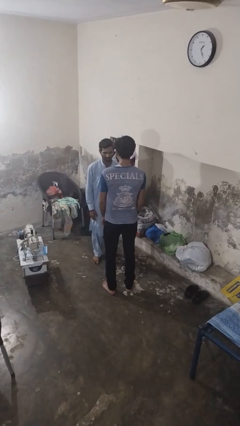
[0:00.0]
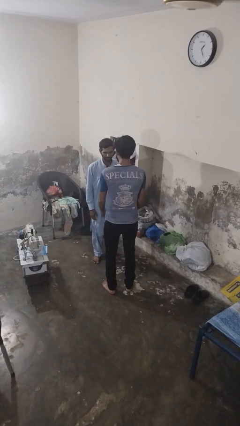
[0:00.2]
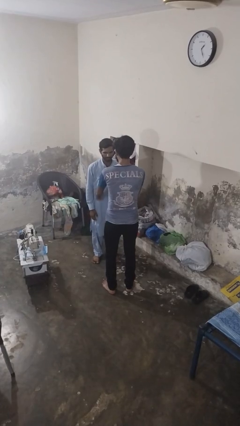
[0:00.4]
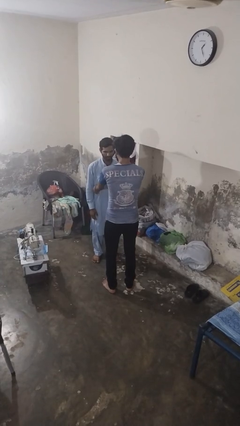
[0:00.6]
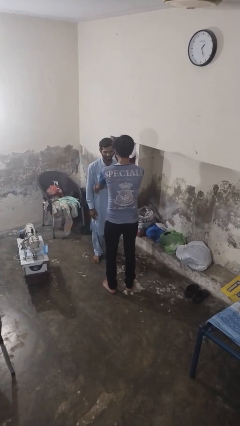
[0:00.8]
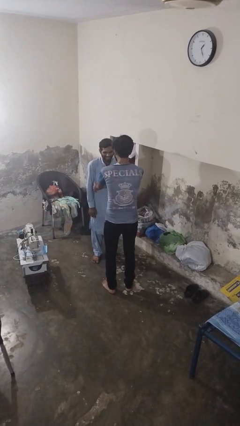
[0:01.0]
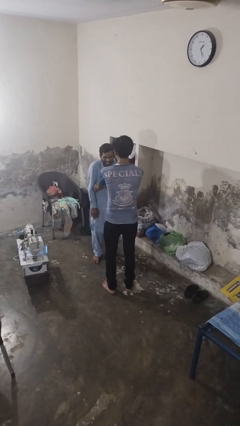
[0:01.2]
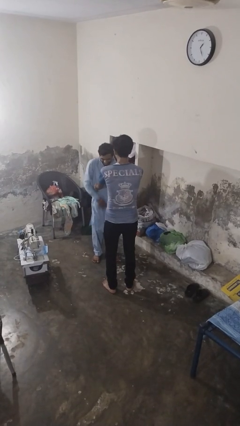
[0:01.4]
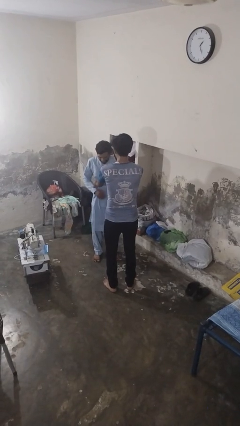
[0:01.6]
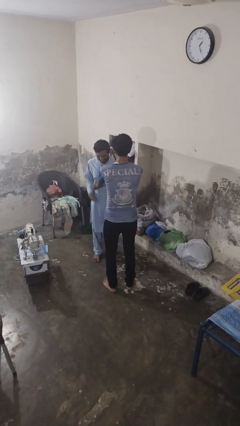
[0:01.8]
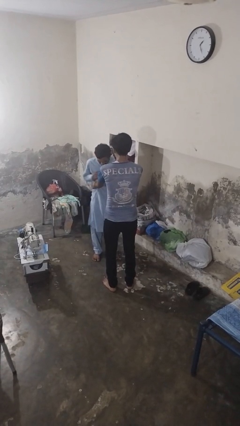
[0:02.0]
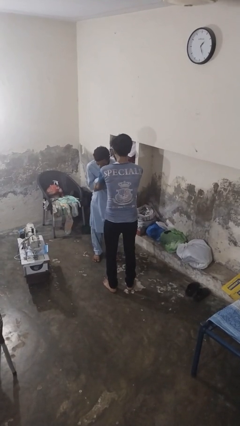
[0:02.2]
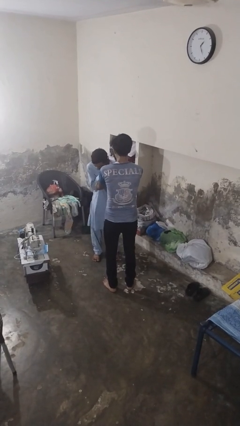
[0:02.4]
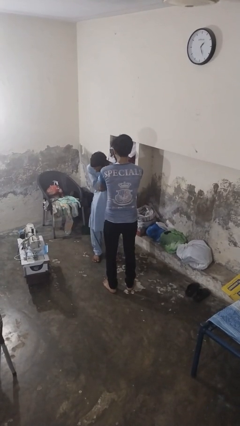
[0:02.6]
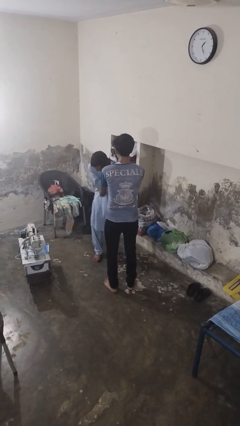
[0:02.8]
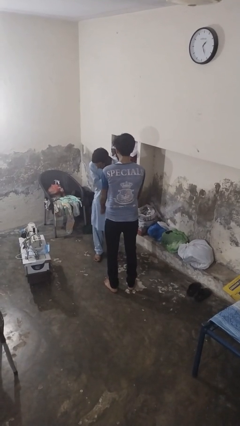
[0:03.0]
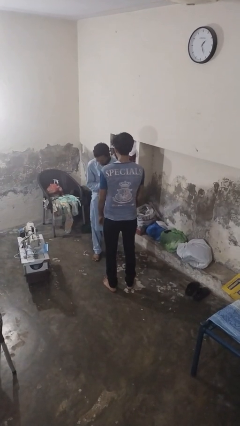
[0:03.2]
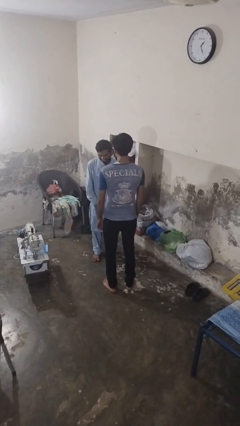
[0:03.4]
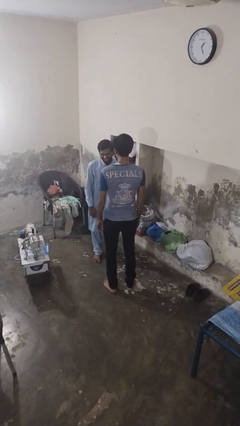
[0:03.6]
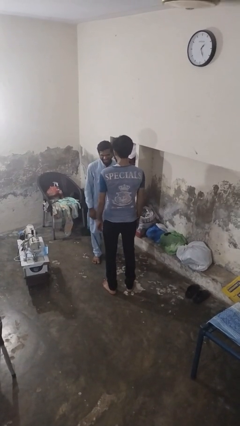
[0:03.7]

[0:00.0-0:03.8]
person tickles person

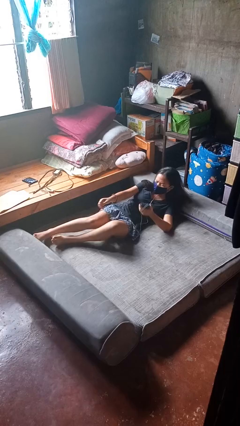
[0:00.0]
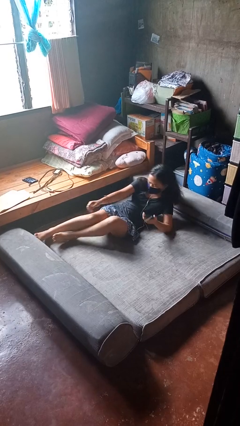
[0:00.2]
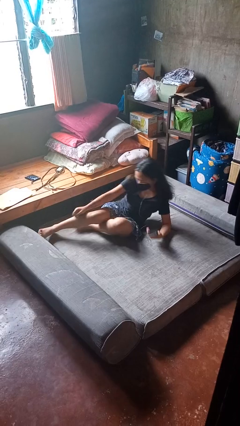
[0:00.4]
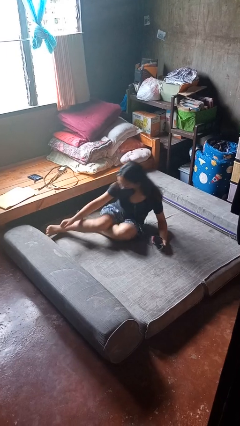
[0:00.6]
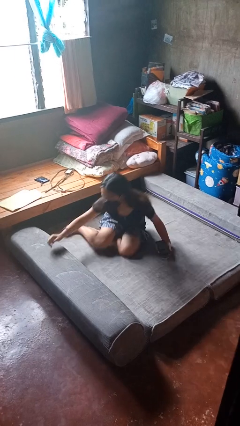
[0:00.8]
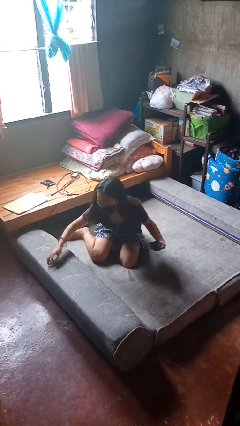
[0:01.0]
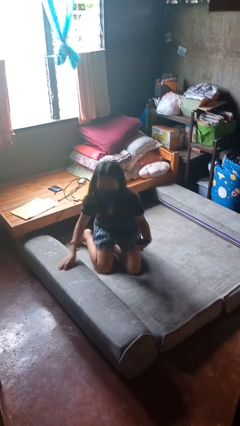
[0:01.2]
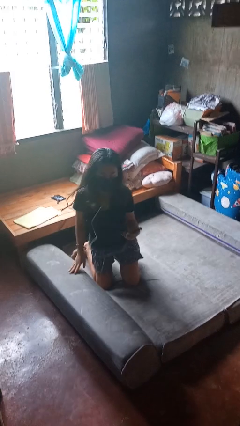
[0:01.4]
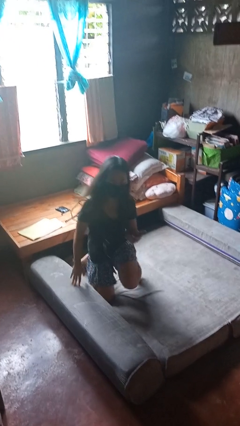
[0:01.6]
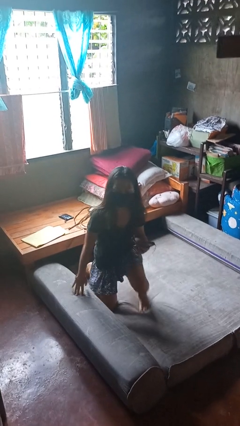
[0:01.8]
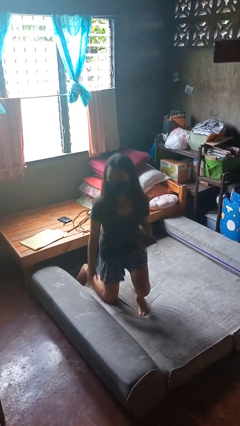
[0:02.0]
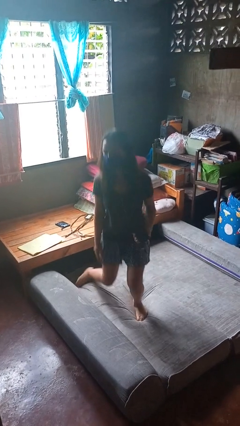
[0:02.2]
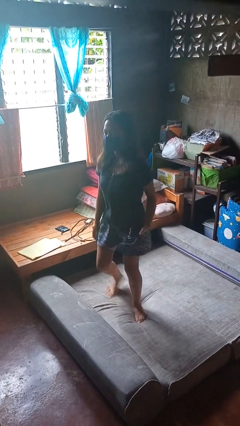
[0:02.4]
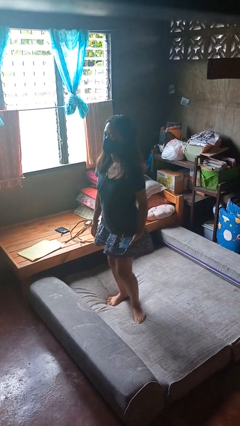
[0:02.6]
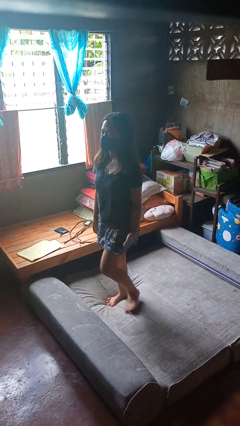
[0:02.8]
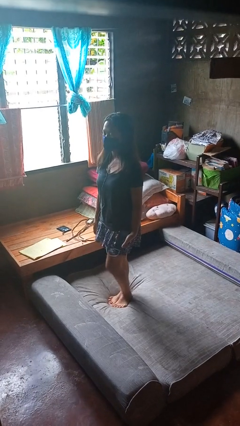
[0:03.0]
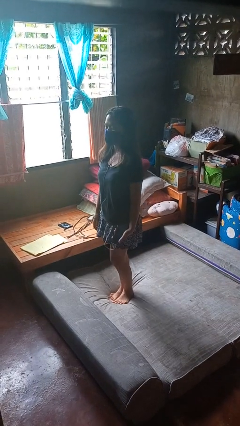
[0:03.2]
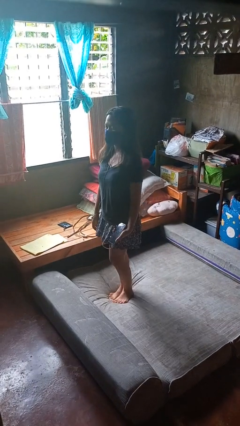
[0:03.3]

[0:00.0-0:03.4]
person stands up

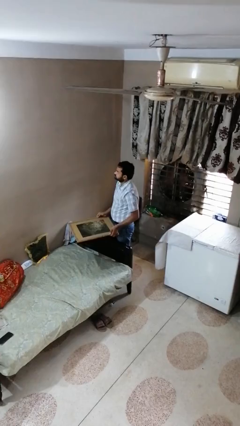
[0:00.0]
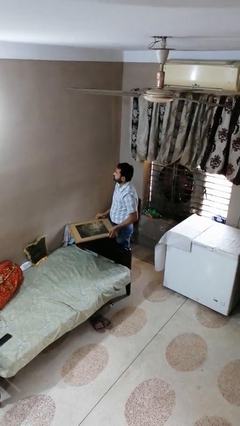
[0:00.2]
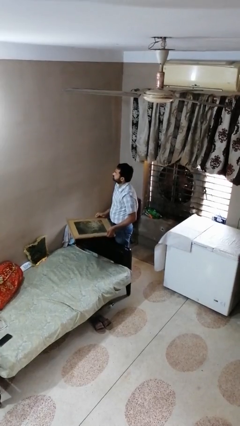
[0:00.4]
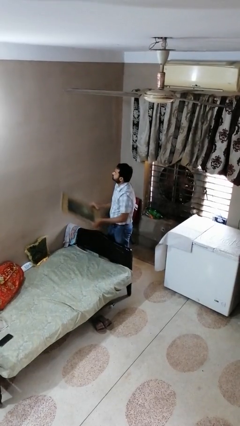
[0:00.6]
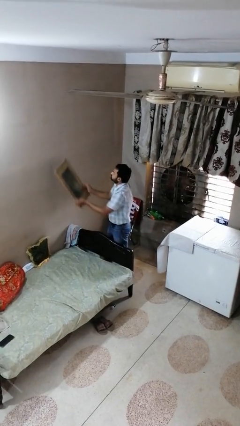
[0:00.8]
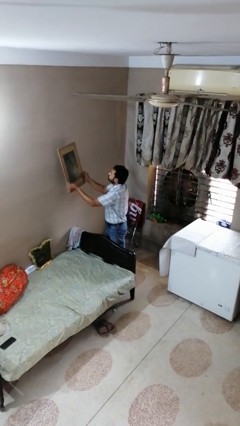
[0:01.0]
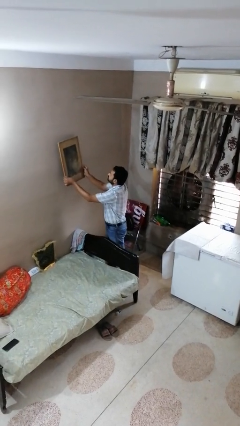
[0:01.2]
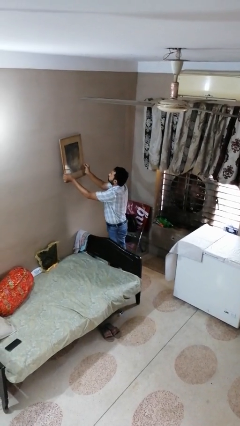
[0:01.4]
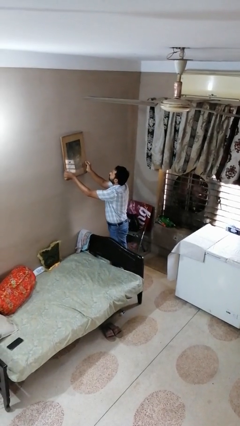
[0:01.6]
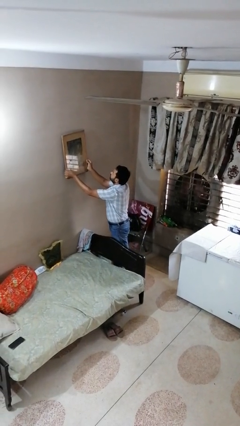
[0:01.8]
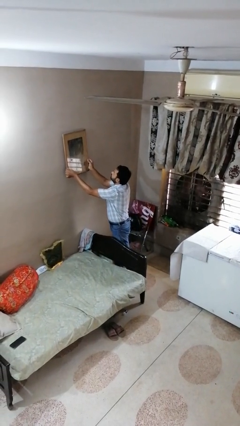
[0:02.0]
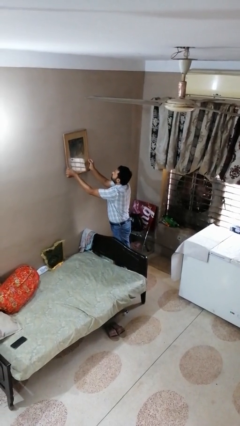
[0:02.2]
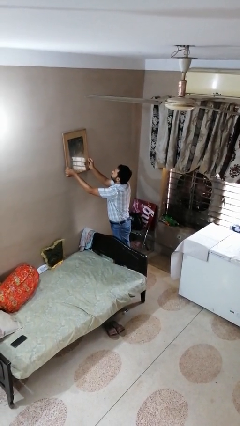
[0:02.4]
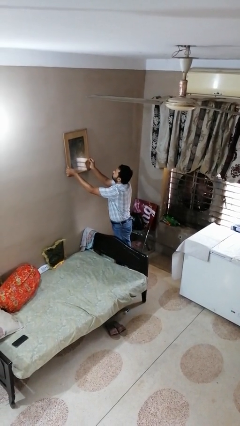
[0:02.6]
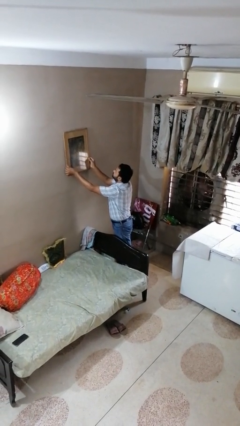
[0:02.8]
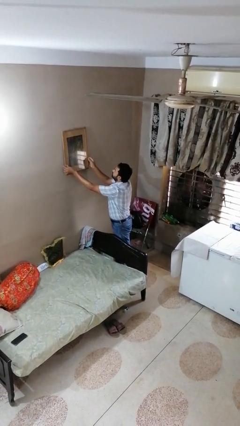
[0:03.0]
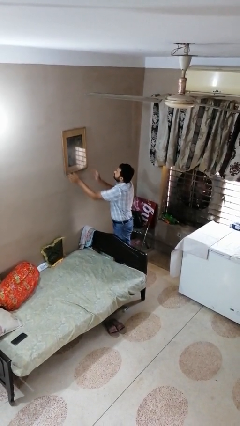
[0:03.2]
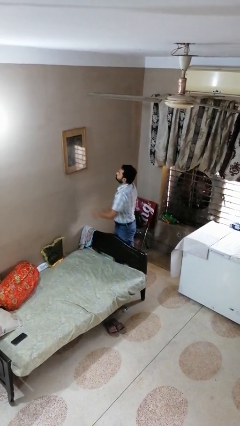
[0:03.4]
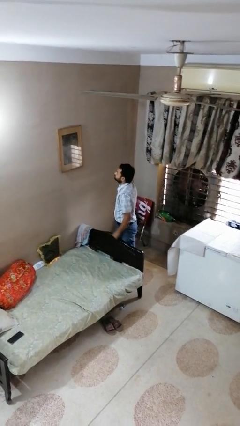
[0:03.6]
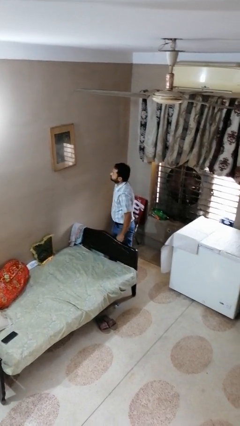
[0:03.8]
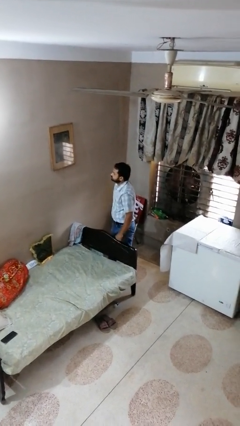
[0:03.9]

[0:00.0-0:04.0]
person puts up picture frame

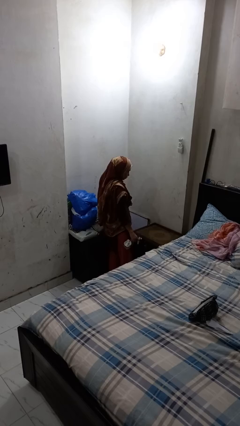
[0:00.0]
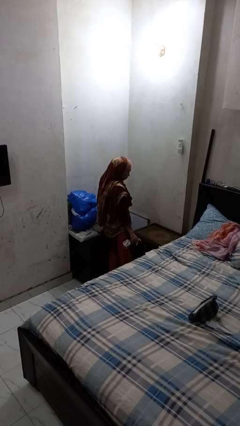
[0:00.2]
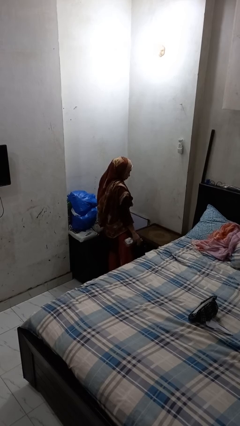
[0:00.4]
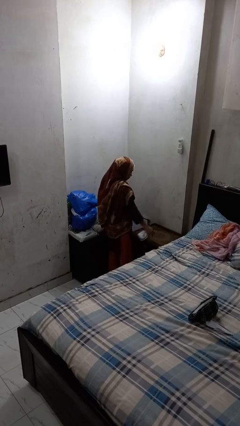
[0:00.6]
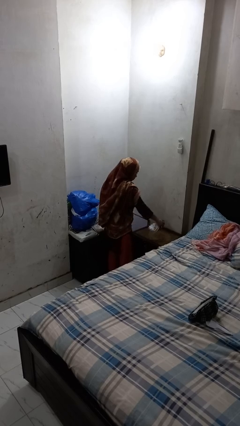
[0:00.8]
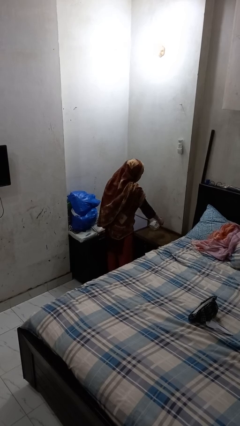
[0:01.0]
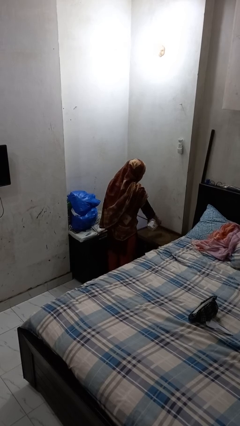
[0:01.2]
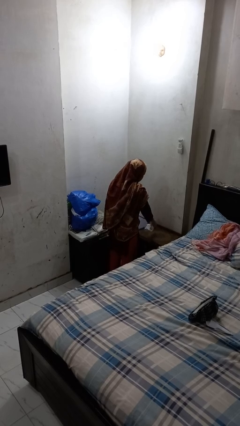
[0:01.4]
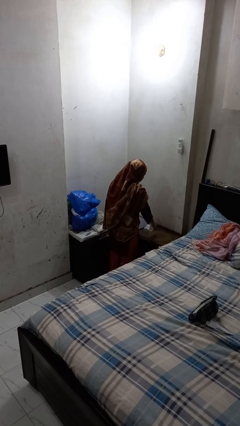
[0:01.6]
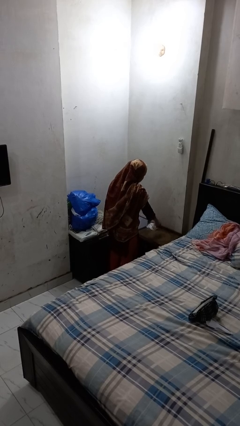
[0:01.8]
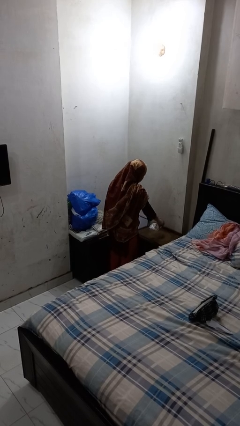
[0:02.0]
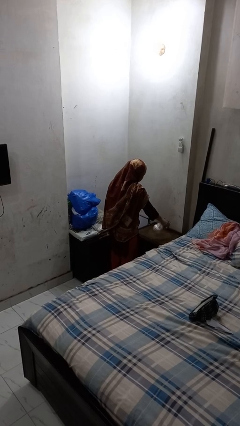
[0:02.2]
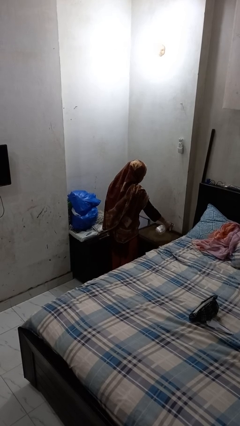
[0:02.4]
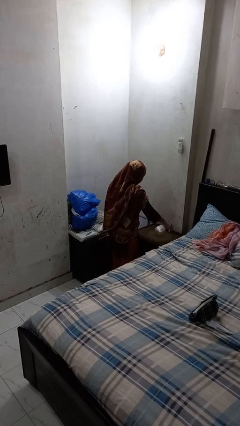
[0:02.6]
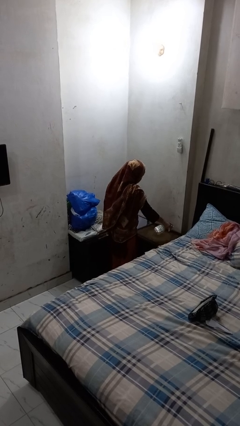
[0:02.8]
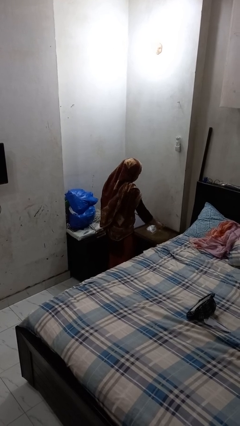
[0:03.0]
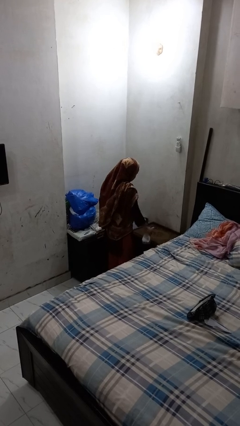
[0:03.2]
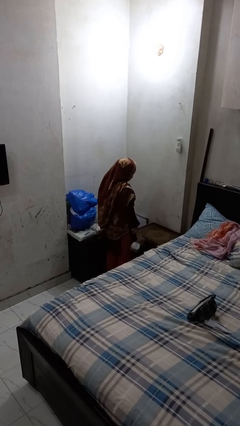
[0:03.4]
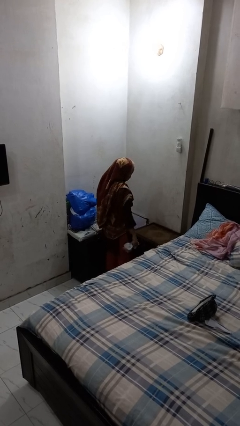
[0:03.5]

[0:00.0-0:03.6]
person sprays from bottle

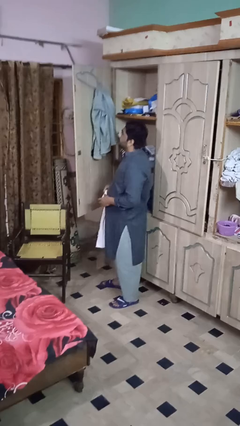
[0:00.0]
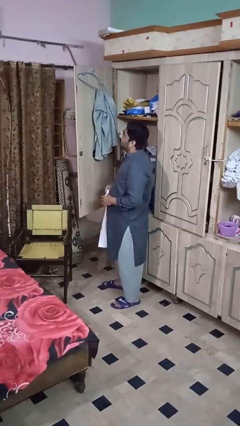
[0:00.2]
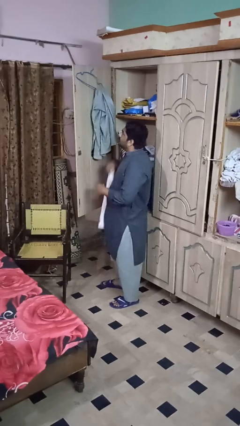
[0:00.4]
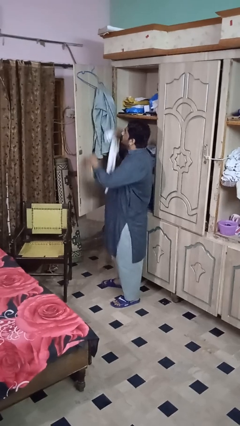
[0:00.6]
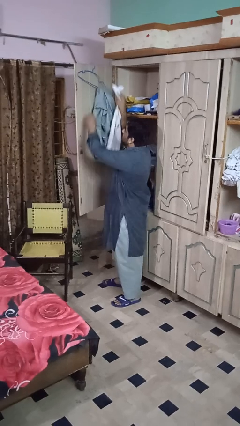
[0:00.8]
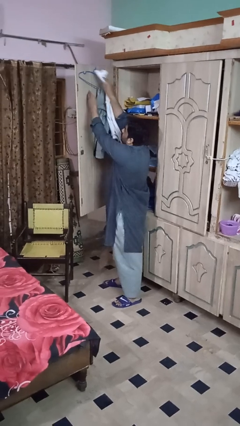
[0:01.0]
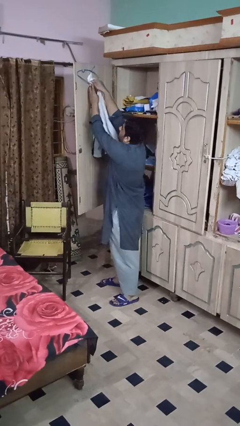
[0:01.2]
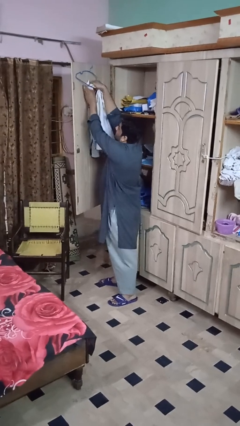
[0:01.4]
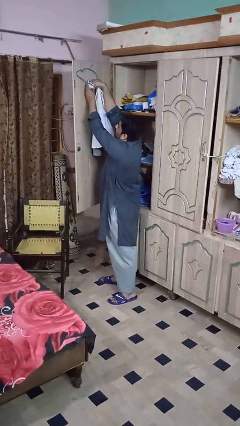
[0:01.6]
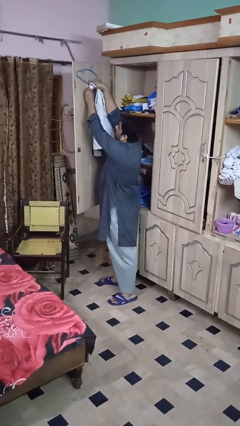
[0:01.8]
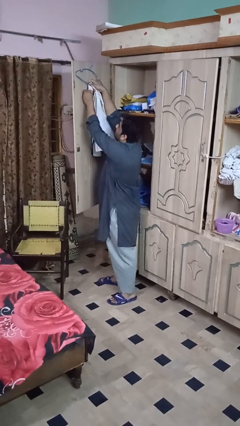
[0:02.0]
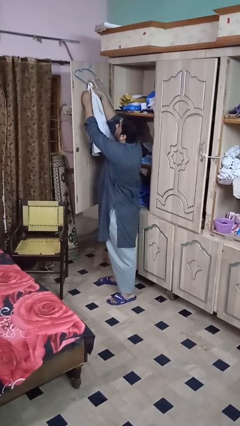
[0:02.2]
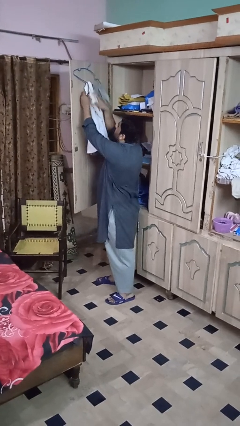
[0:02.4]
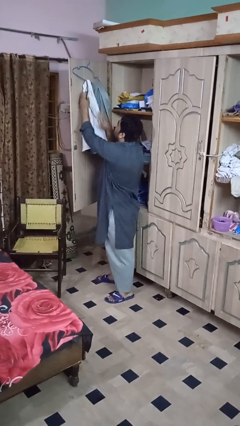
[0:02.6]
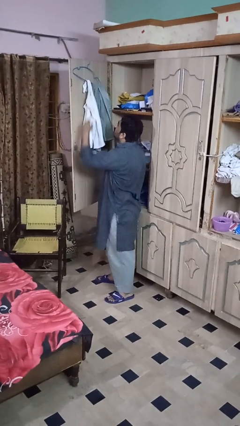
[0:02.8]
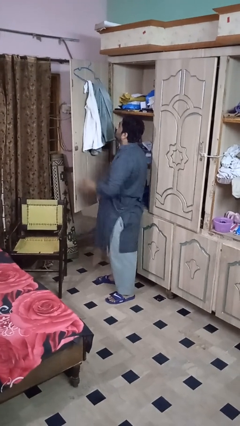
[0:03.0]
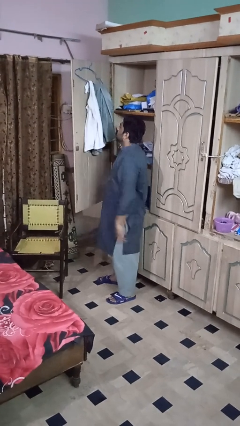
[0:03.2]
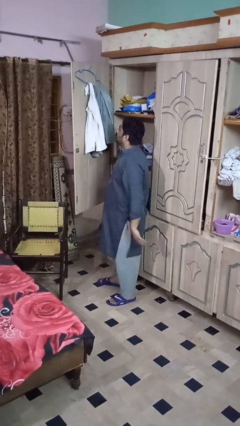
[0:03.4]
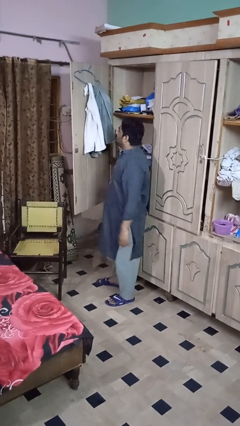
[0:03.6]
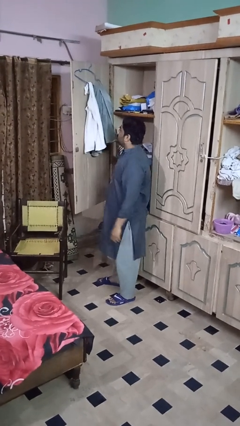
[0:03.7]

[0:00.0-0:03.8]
person puts clothes into closet
